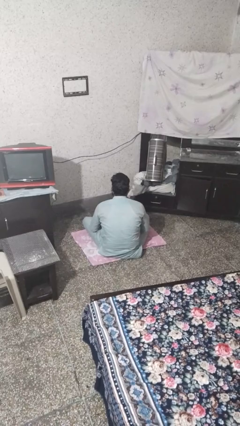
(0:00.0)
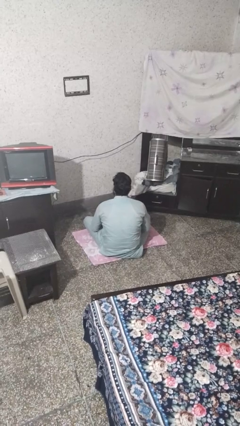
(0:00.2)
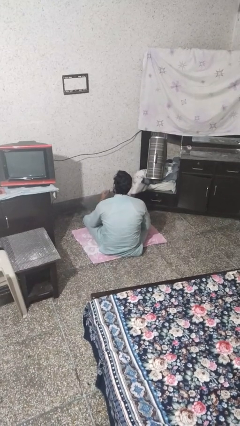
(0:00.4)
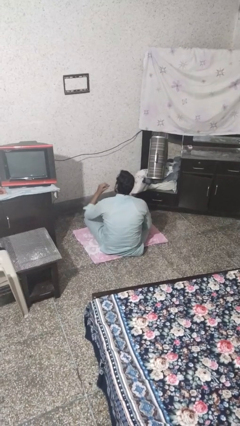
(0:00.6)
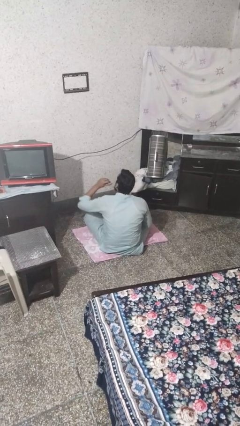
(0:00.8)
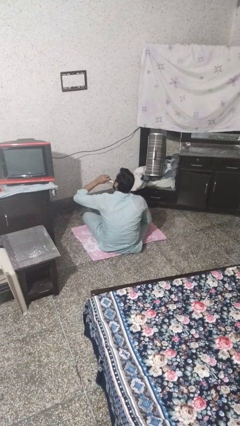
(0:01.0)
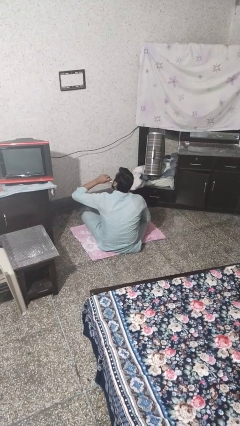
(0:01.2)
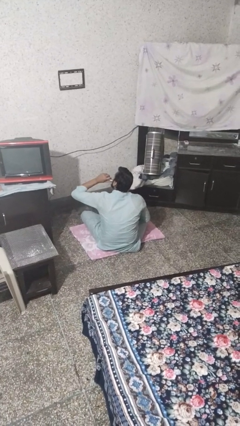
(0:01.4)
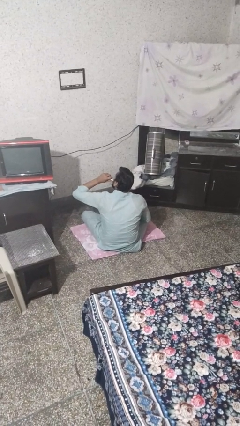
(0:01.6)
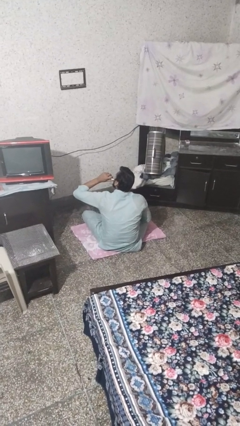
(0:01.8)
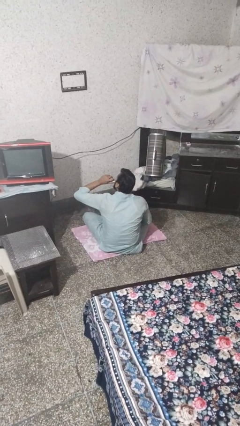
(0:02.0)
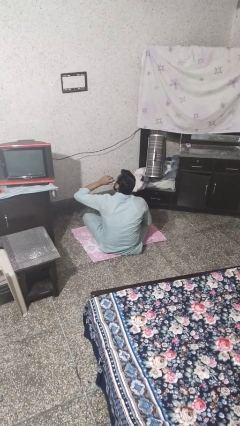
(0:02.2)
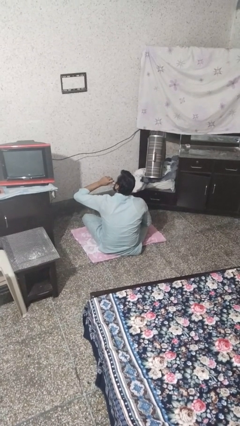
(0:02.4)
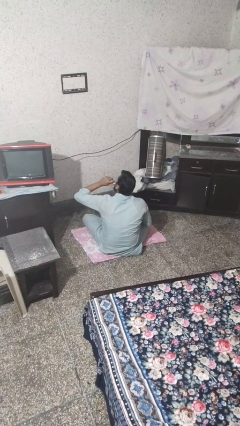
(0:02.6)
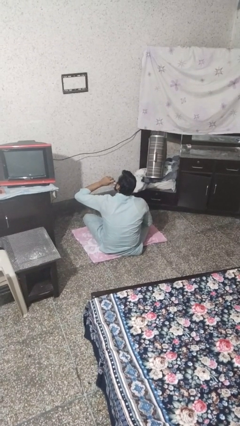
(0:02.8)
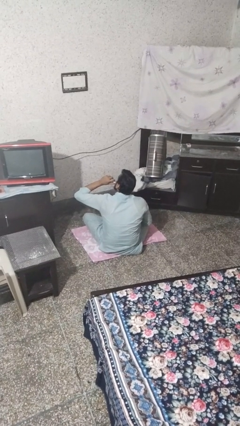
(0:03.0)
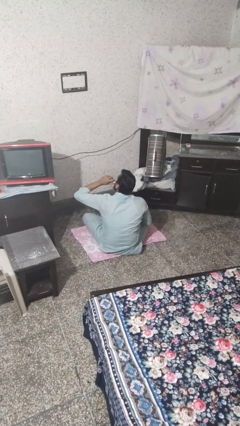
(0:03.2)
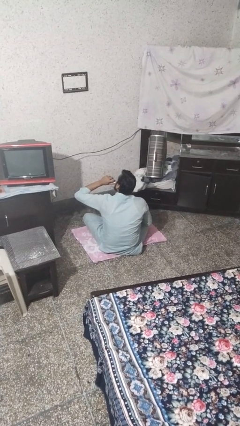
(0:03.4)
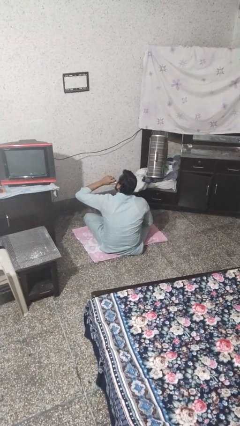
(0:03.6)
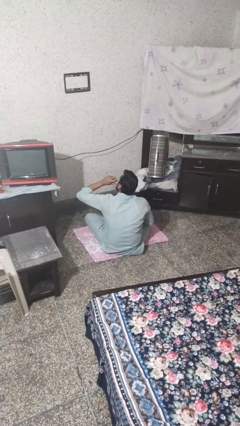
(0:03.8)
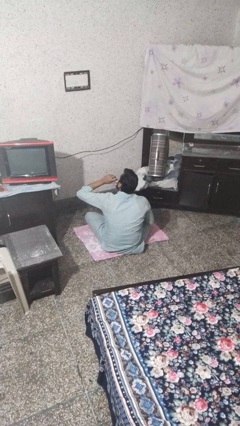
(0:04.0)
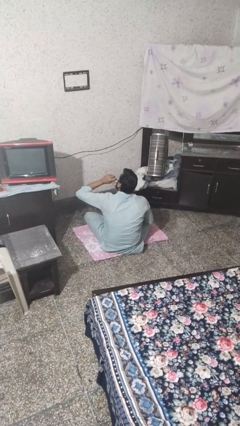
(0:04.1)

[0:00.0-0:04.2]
person vapes

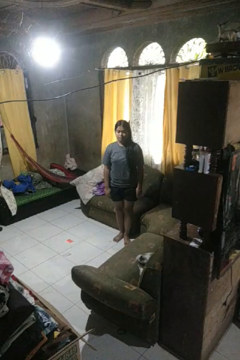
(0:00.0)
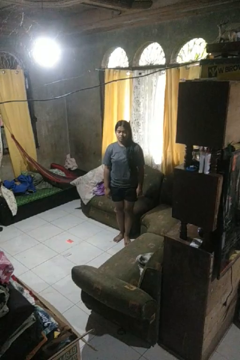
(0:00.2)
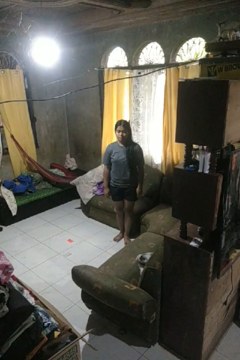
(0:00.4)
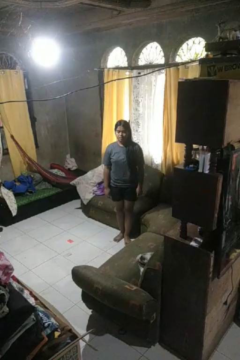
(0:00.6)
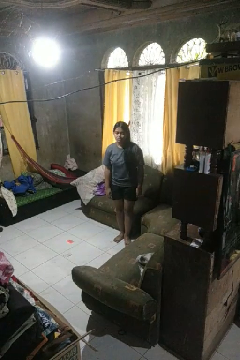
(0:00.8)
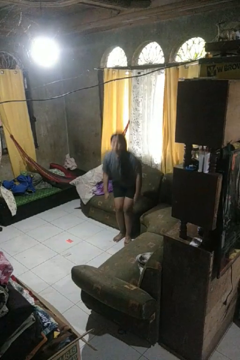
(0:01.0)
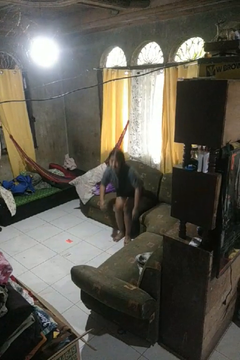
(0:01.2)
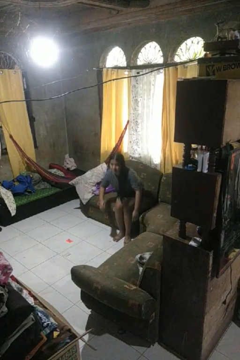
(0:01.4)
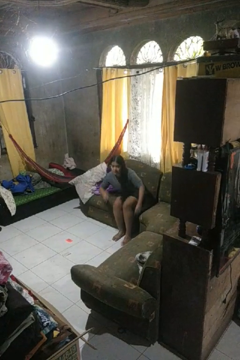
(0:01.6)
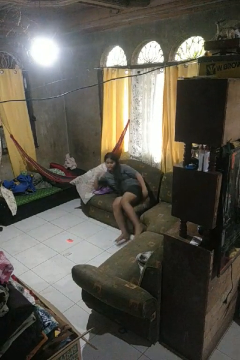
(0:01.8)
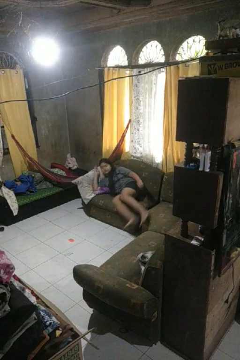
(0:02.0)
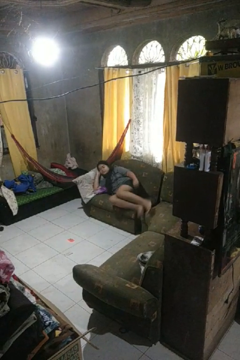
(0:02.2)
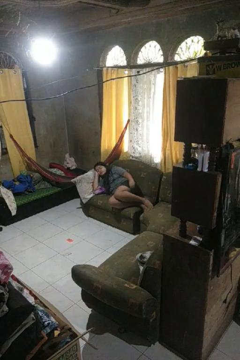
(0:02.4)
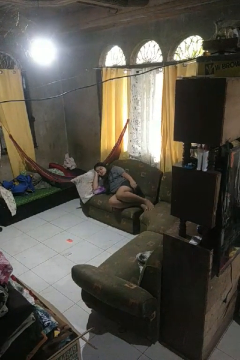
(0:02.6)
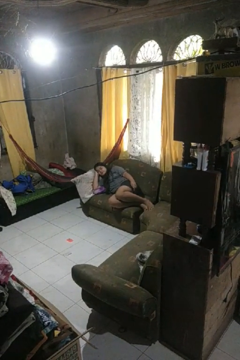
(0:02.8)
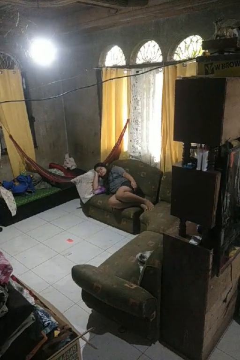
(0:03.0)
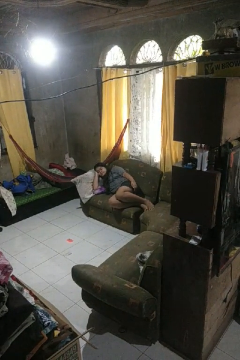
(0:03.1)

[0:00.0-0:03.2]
person lies down on couch

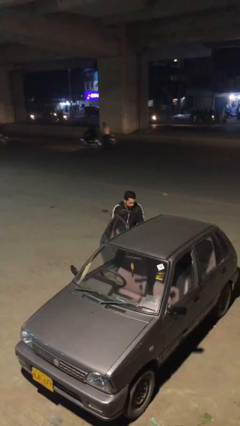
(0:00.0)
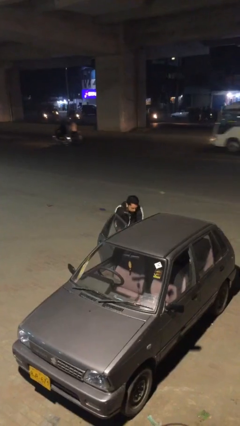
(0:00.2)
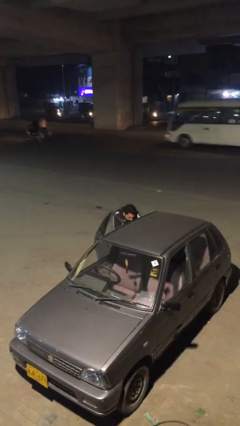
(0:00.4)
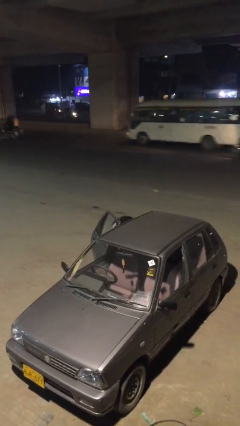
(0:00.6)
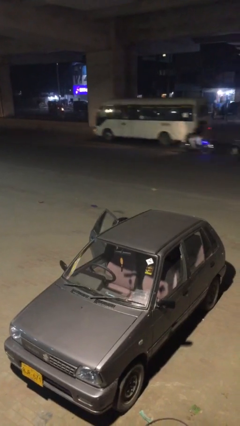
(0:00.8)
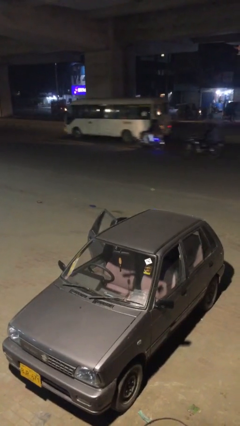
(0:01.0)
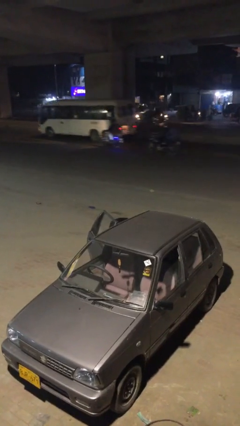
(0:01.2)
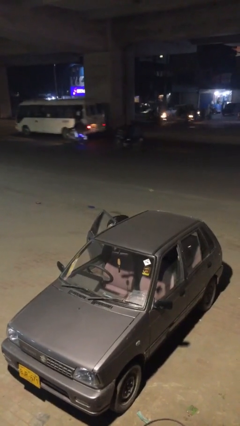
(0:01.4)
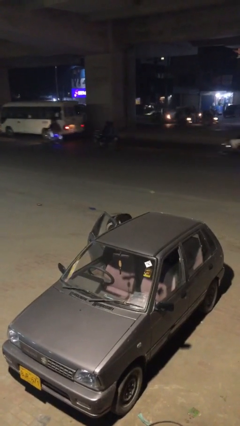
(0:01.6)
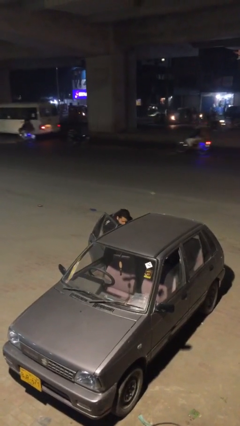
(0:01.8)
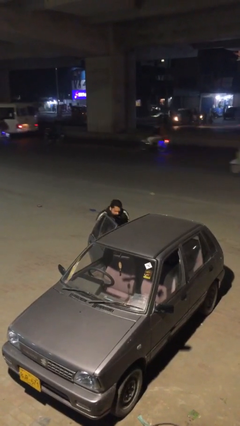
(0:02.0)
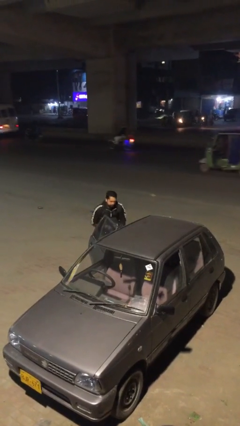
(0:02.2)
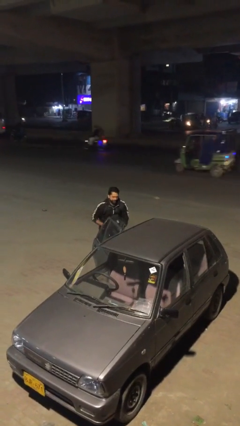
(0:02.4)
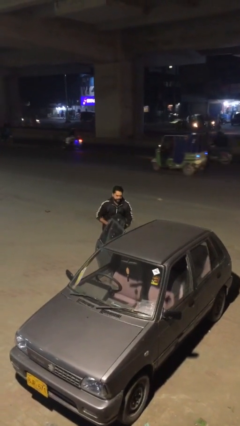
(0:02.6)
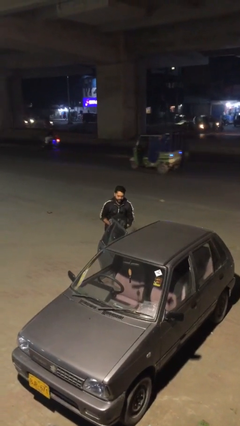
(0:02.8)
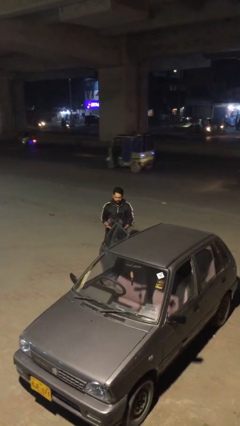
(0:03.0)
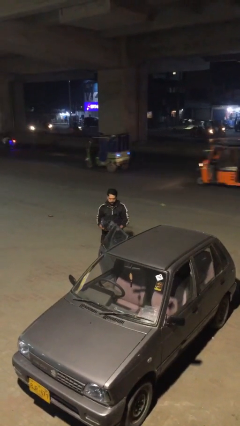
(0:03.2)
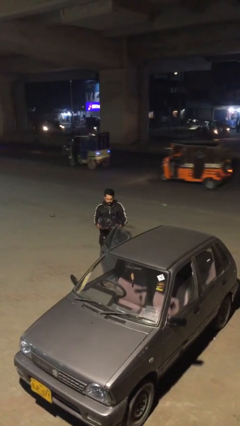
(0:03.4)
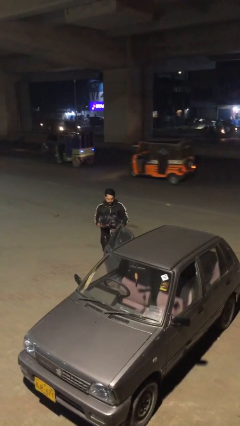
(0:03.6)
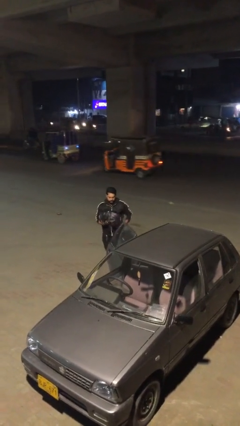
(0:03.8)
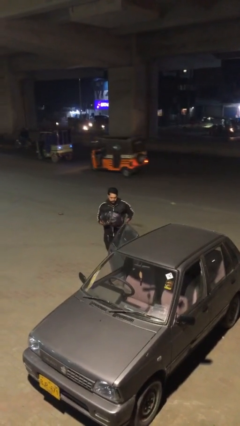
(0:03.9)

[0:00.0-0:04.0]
person unloads car

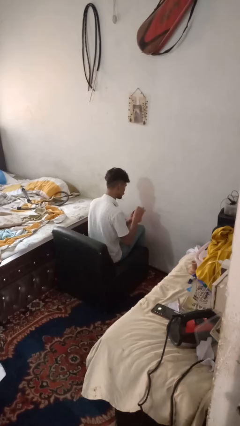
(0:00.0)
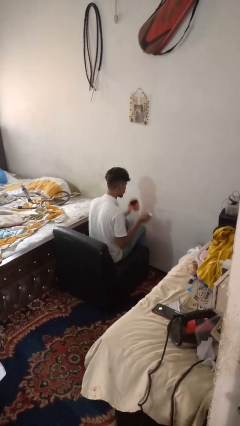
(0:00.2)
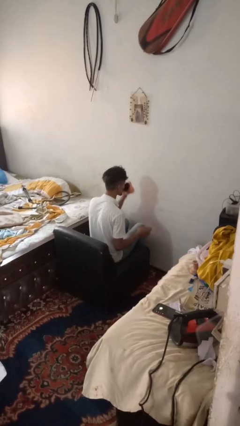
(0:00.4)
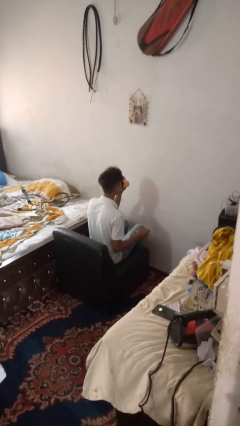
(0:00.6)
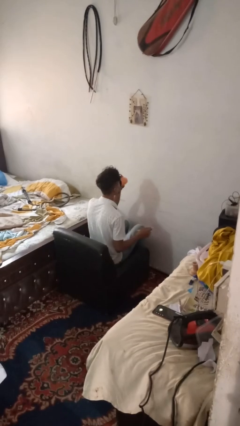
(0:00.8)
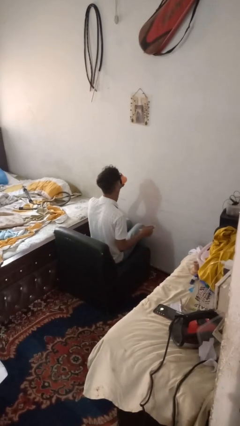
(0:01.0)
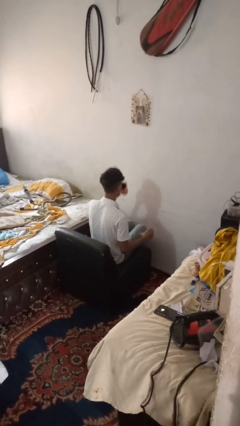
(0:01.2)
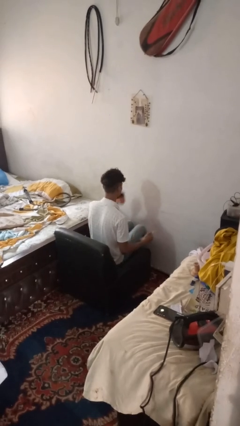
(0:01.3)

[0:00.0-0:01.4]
person drinks from mug

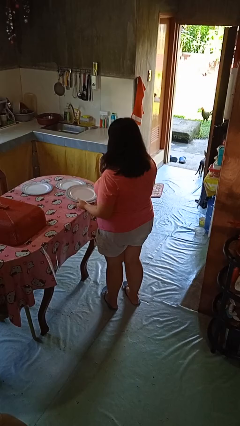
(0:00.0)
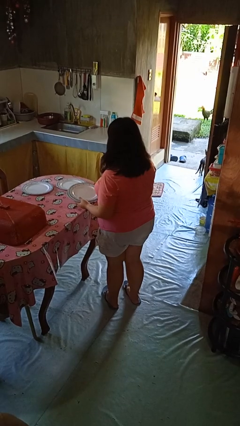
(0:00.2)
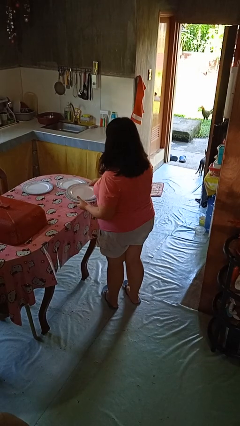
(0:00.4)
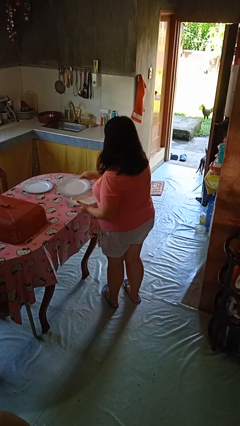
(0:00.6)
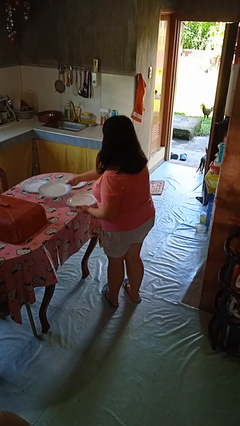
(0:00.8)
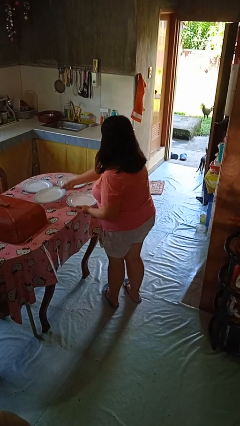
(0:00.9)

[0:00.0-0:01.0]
person sets table

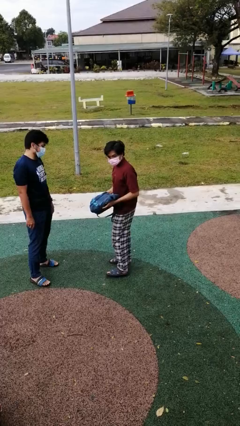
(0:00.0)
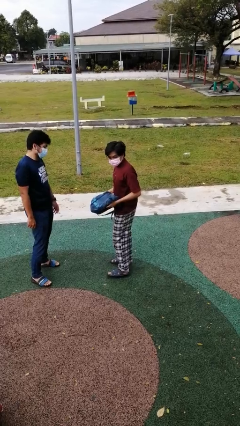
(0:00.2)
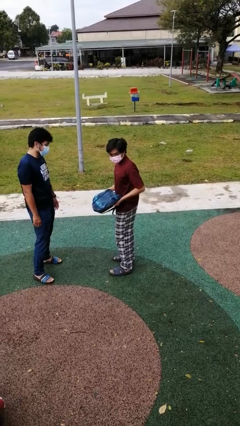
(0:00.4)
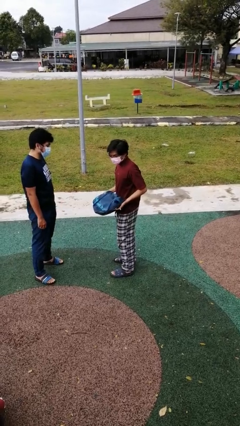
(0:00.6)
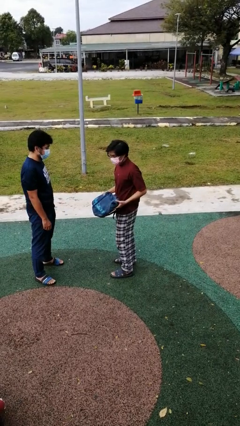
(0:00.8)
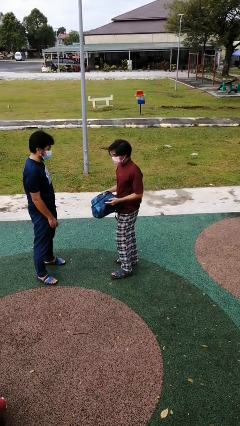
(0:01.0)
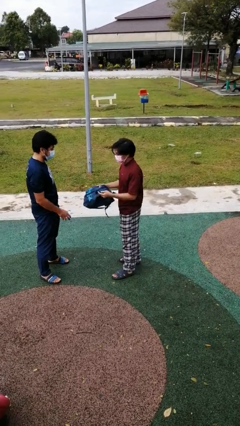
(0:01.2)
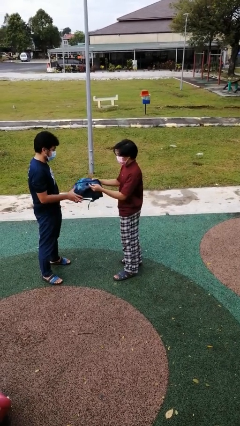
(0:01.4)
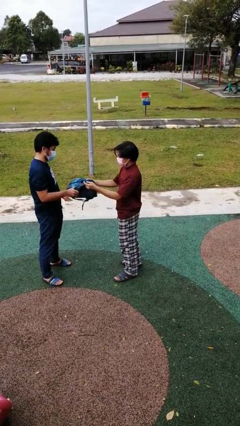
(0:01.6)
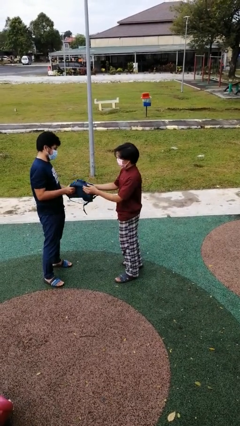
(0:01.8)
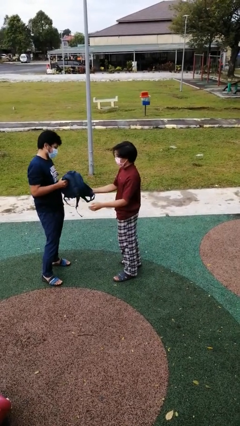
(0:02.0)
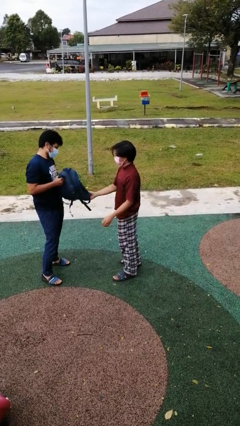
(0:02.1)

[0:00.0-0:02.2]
person transfers object to person

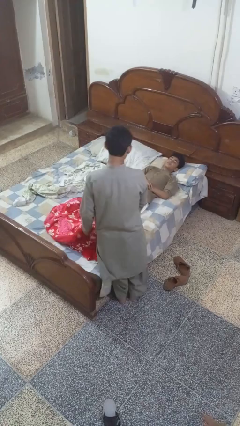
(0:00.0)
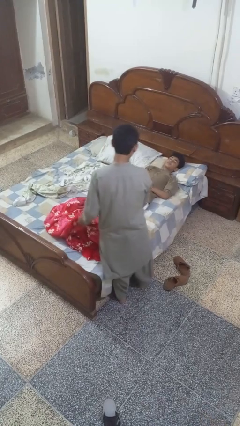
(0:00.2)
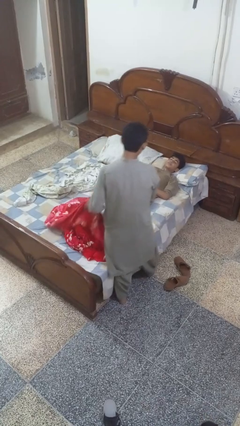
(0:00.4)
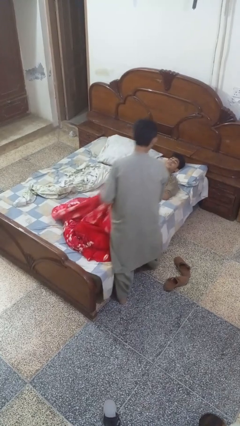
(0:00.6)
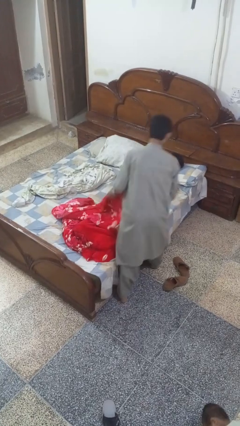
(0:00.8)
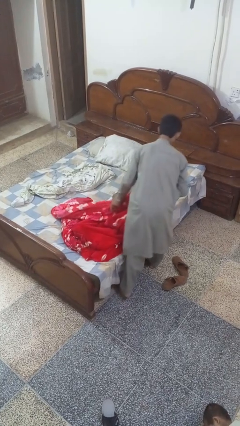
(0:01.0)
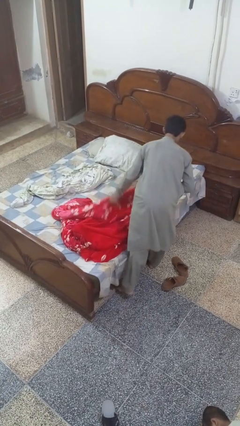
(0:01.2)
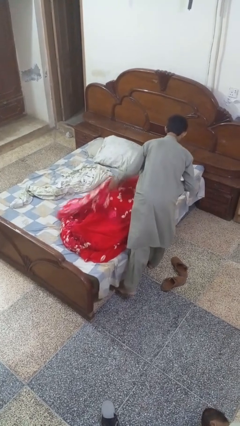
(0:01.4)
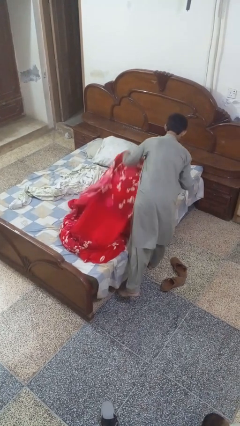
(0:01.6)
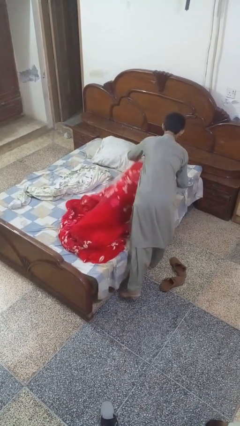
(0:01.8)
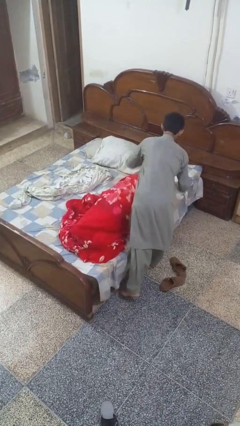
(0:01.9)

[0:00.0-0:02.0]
person covers friend with blanket
